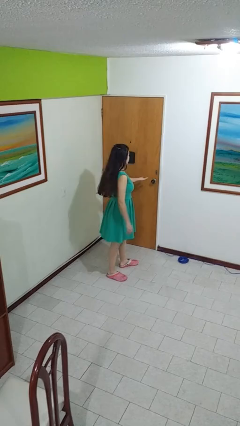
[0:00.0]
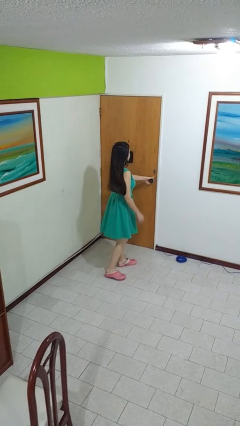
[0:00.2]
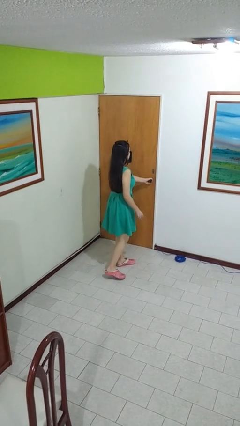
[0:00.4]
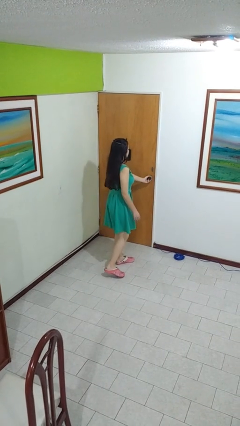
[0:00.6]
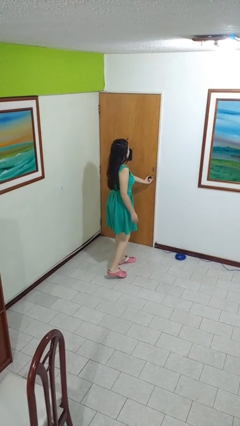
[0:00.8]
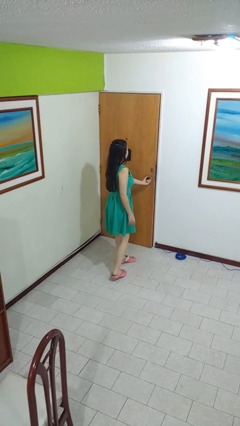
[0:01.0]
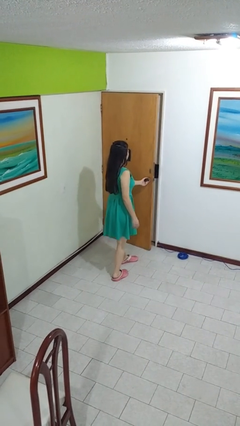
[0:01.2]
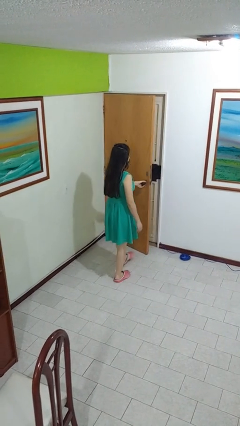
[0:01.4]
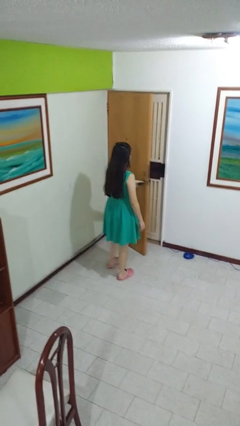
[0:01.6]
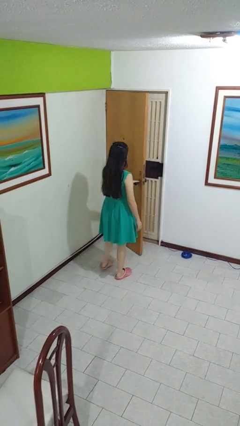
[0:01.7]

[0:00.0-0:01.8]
person opens facility door

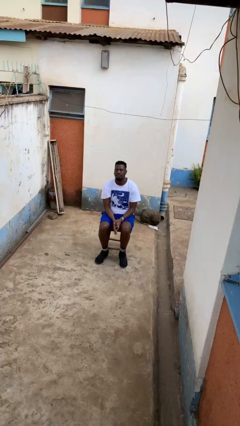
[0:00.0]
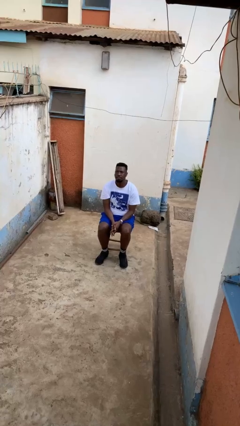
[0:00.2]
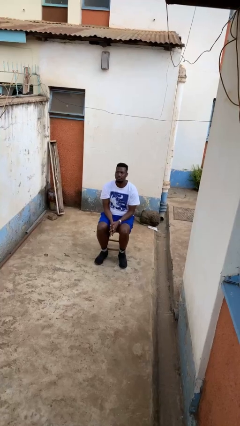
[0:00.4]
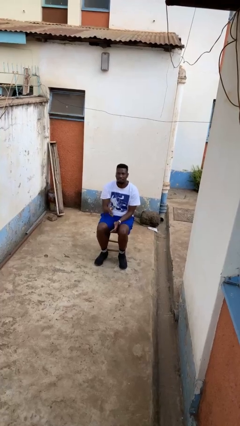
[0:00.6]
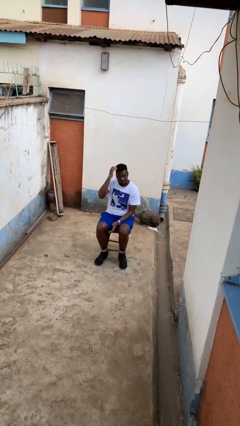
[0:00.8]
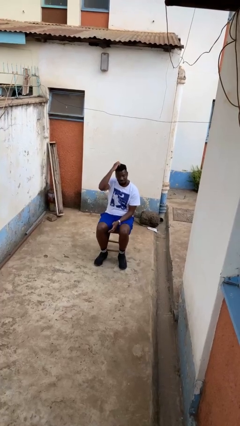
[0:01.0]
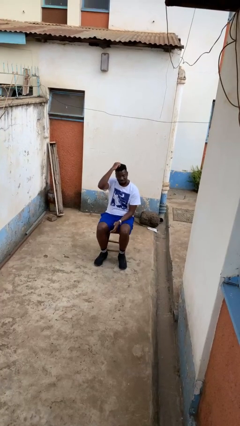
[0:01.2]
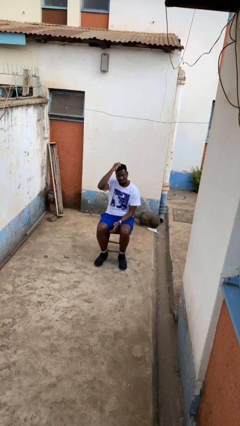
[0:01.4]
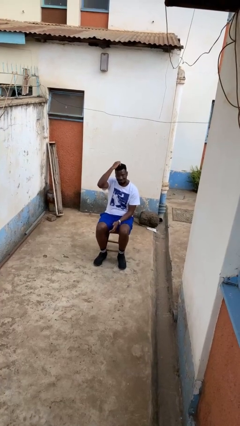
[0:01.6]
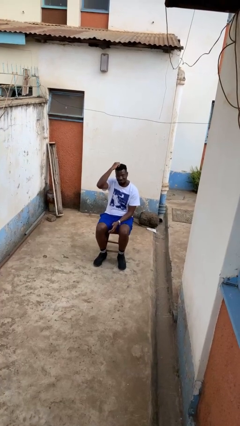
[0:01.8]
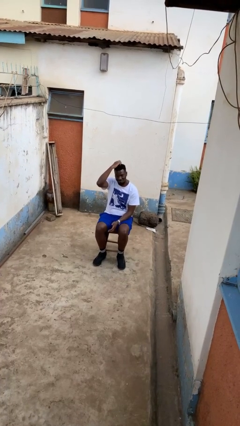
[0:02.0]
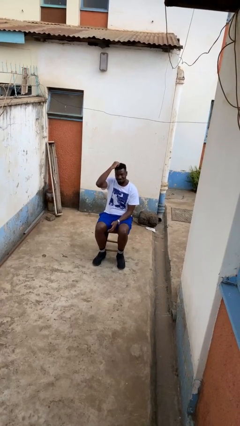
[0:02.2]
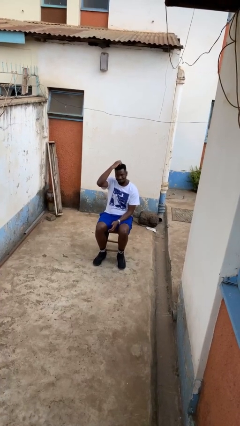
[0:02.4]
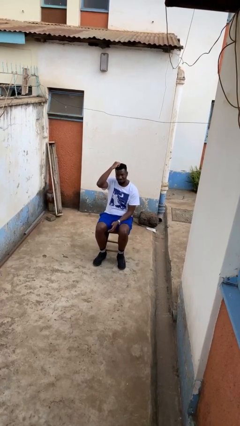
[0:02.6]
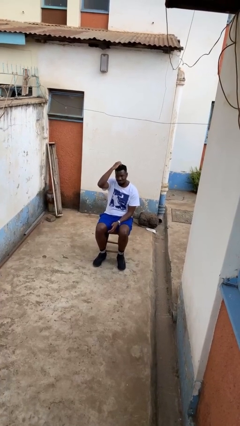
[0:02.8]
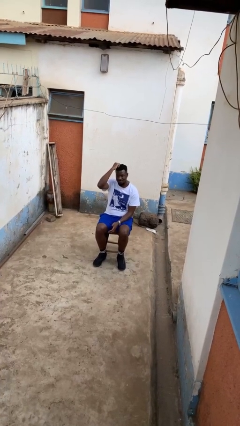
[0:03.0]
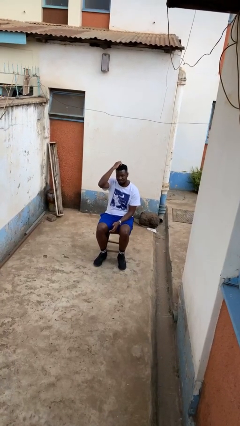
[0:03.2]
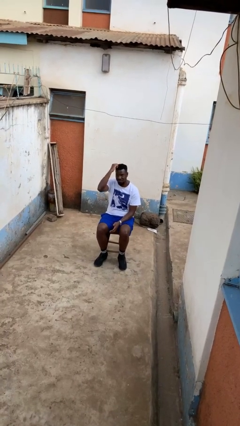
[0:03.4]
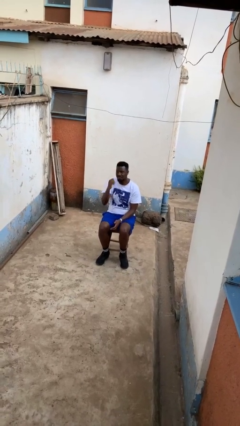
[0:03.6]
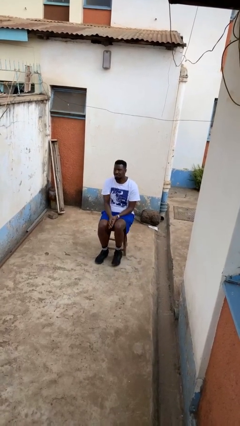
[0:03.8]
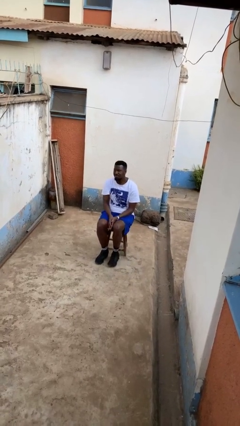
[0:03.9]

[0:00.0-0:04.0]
person scratches face

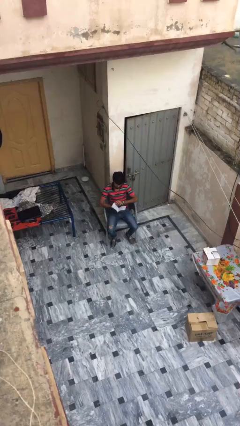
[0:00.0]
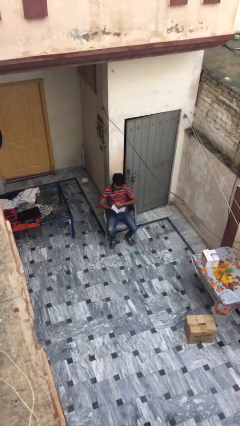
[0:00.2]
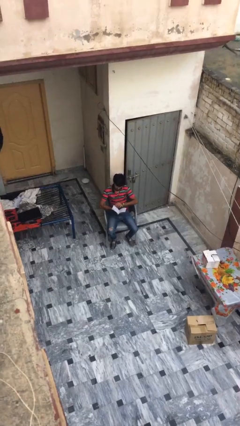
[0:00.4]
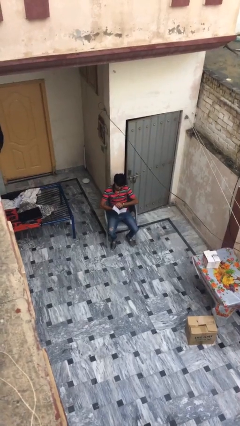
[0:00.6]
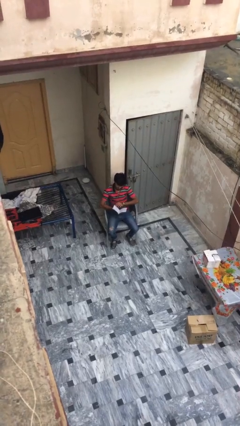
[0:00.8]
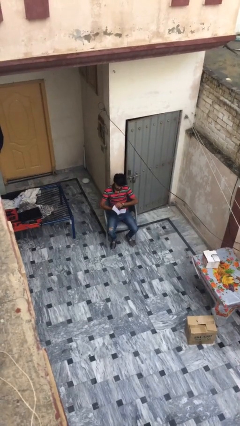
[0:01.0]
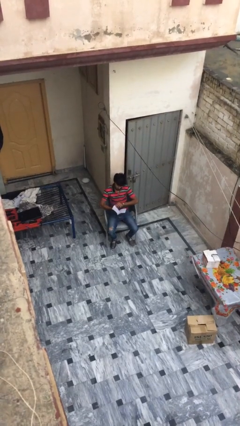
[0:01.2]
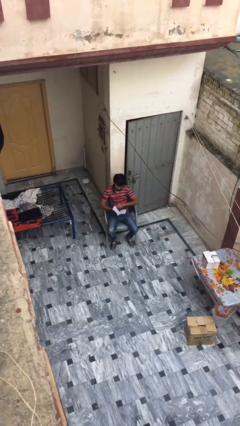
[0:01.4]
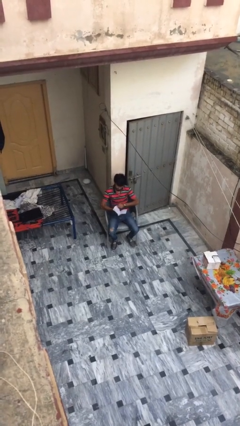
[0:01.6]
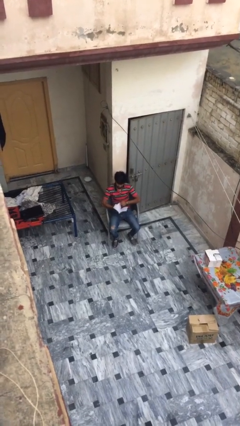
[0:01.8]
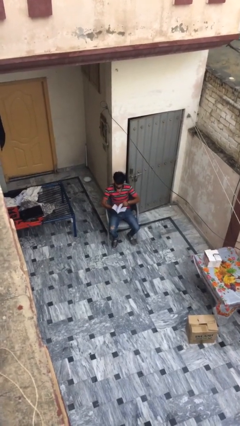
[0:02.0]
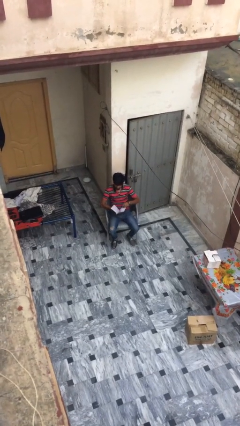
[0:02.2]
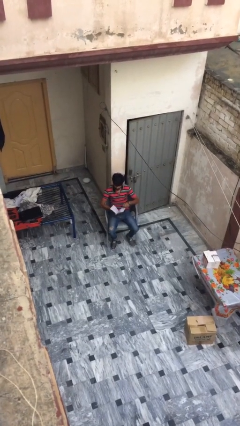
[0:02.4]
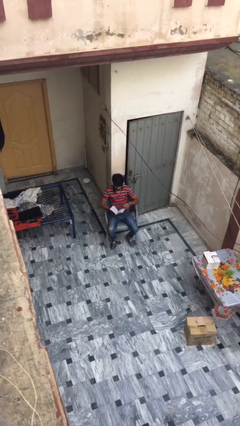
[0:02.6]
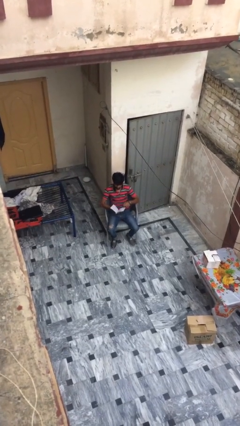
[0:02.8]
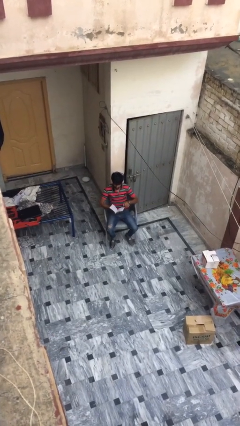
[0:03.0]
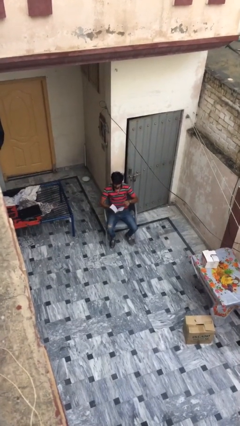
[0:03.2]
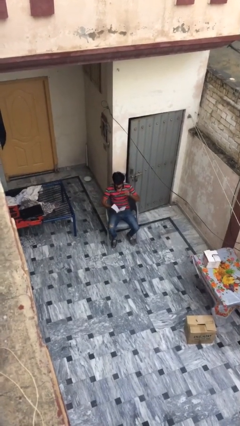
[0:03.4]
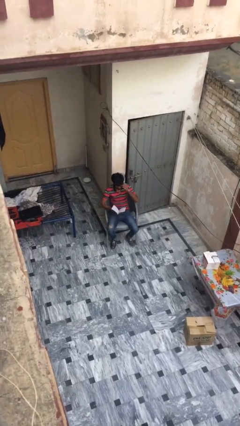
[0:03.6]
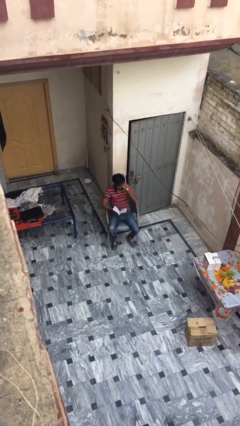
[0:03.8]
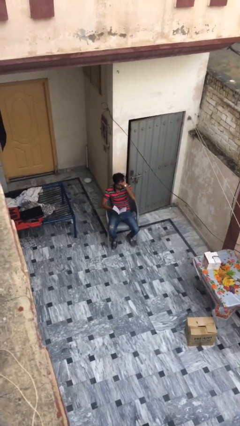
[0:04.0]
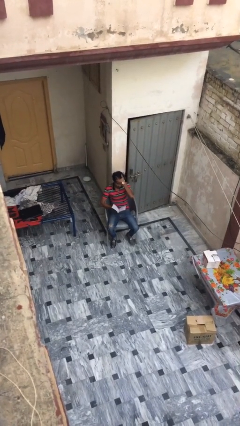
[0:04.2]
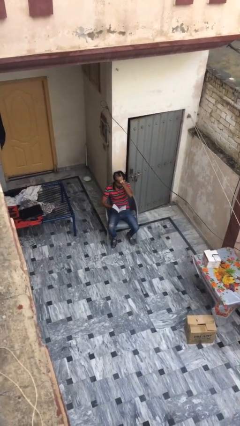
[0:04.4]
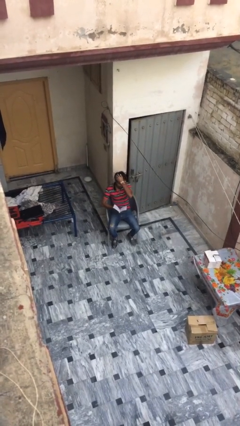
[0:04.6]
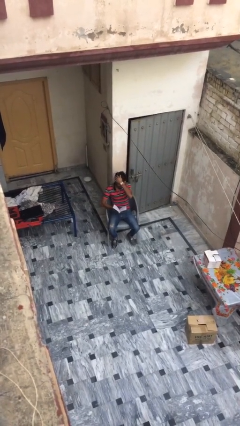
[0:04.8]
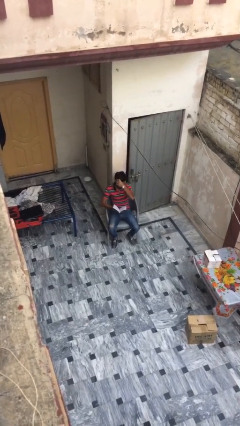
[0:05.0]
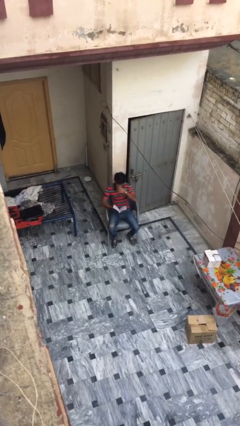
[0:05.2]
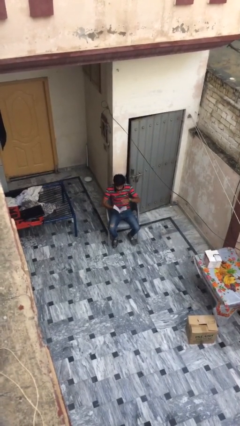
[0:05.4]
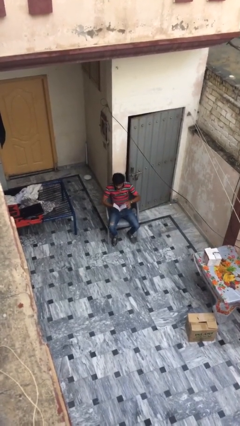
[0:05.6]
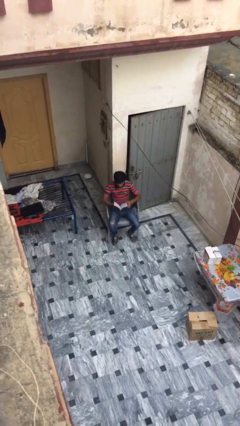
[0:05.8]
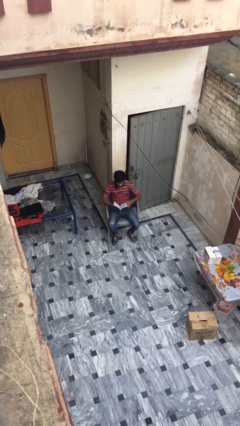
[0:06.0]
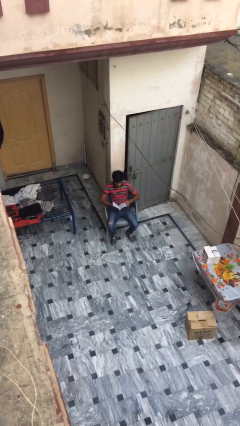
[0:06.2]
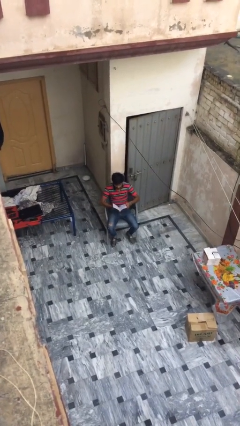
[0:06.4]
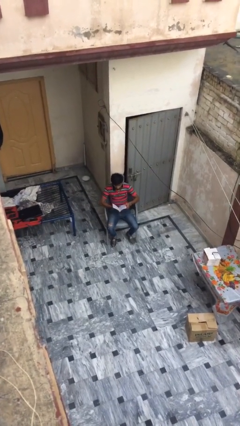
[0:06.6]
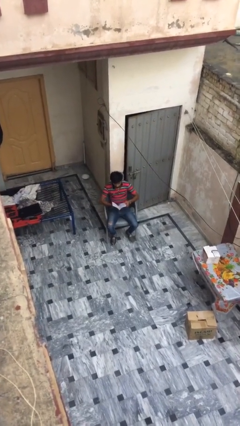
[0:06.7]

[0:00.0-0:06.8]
person reads document

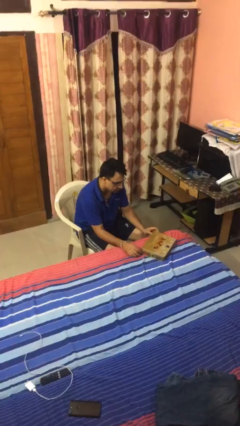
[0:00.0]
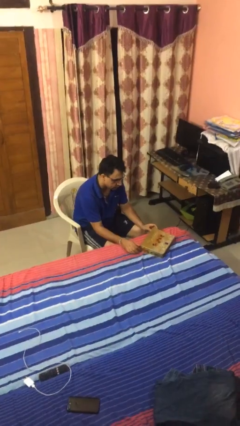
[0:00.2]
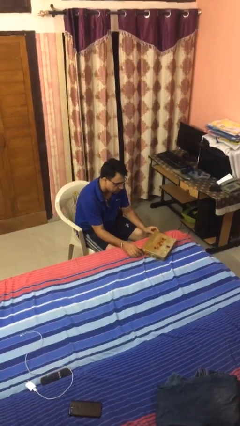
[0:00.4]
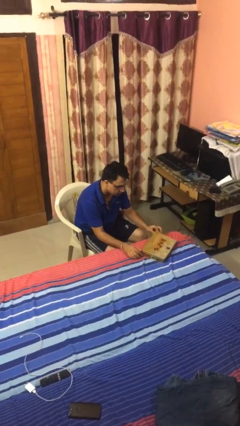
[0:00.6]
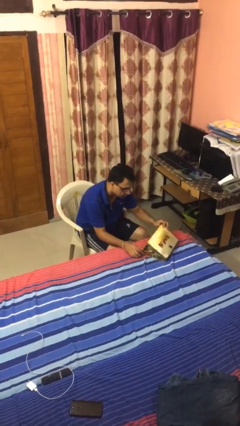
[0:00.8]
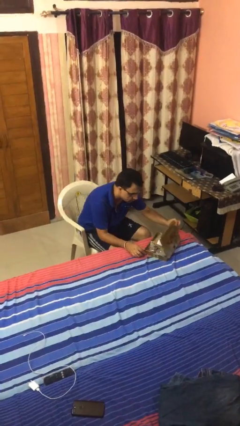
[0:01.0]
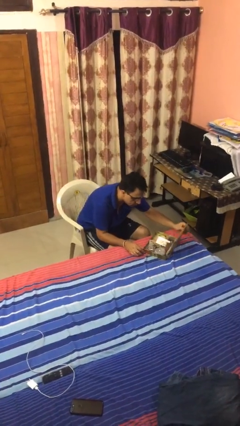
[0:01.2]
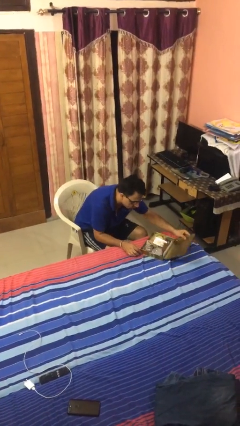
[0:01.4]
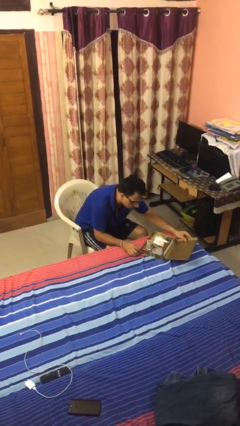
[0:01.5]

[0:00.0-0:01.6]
person opens jewelry box

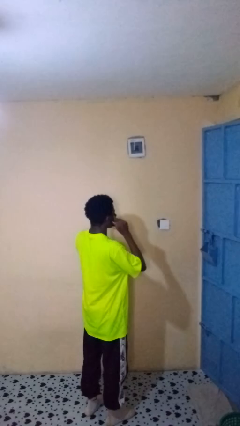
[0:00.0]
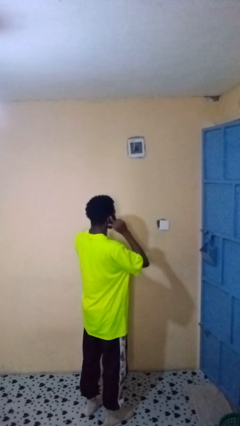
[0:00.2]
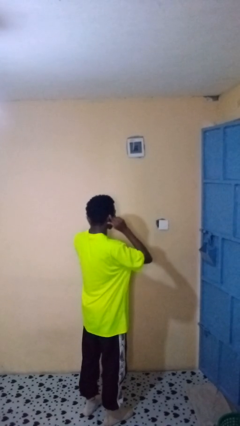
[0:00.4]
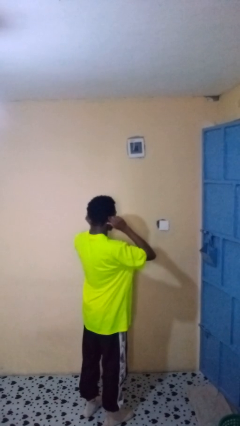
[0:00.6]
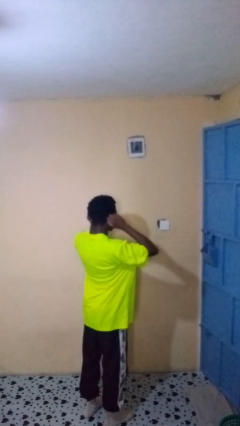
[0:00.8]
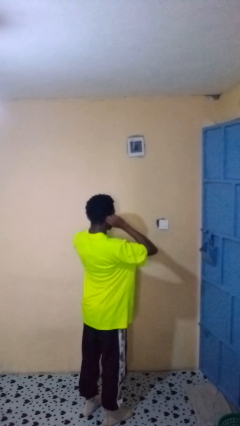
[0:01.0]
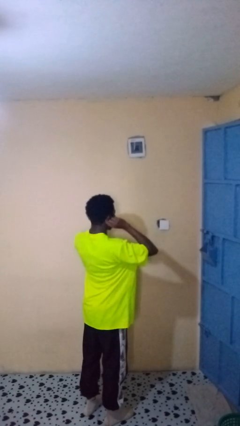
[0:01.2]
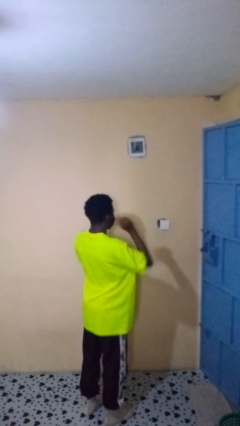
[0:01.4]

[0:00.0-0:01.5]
person puts on facemask

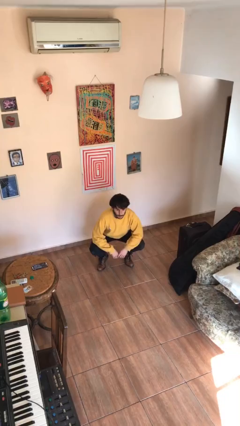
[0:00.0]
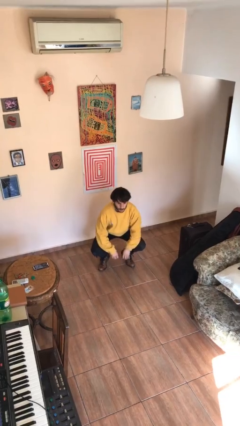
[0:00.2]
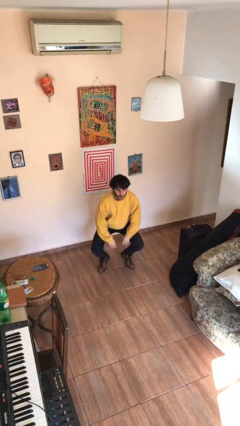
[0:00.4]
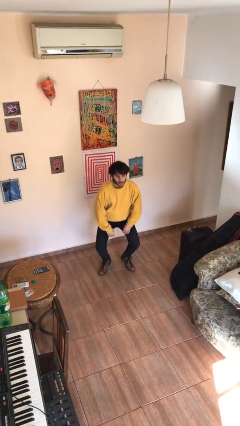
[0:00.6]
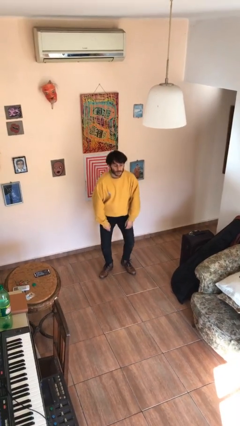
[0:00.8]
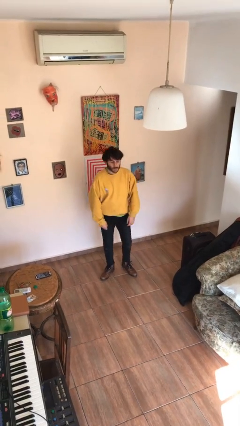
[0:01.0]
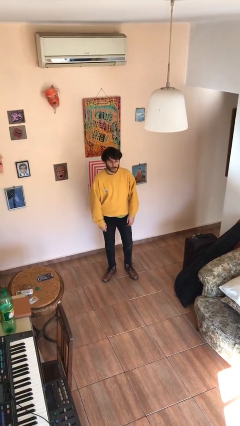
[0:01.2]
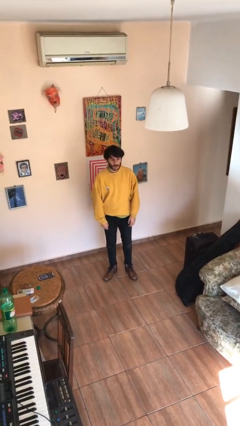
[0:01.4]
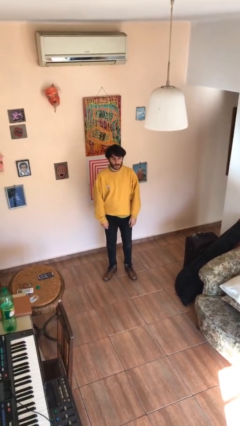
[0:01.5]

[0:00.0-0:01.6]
person stands up

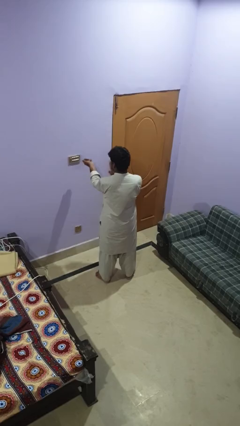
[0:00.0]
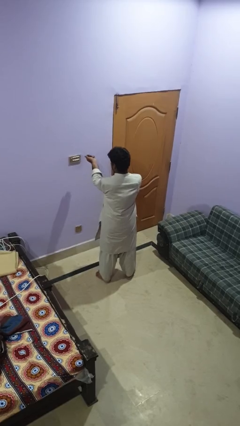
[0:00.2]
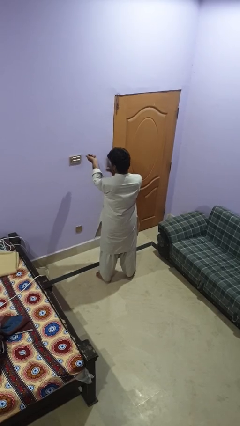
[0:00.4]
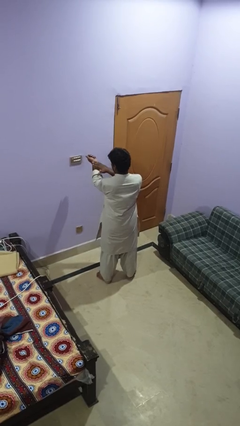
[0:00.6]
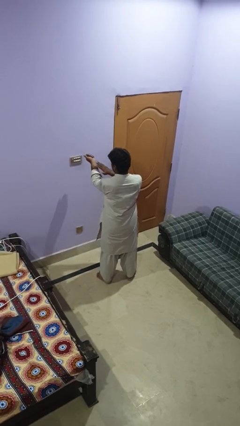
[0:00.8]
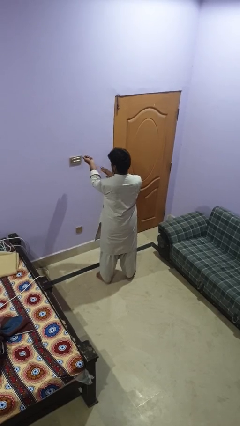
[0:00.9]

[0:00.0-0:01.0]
person swats bug
